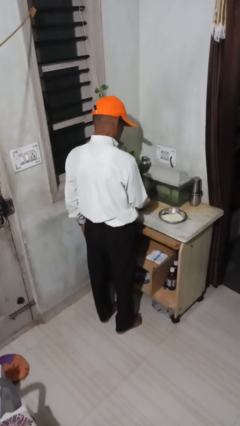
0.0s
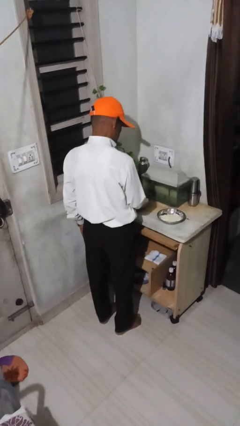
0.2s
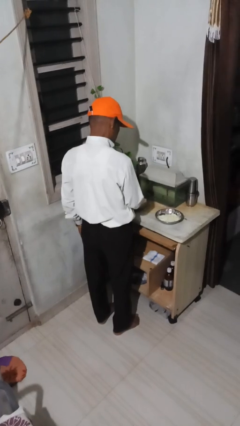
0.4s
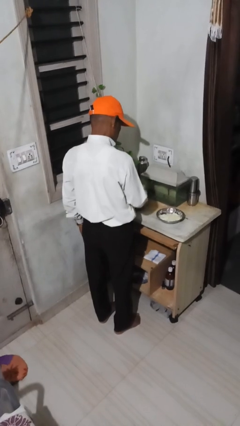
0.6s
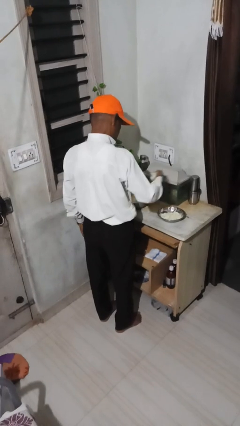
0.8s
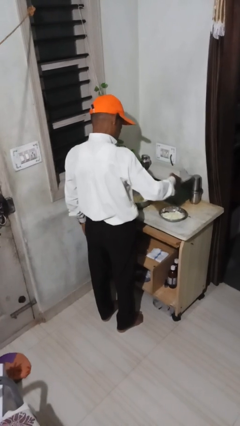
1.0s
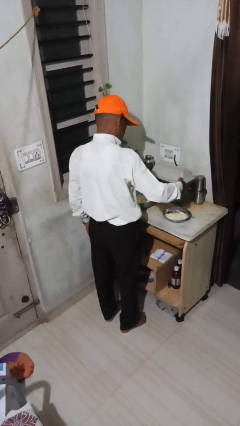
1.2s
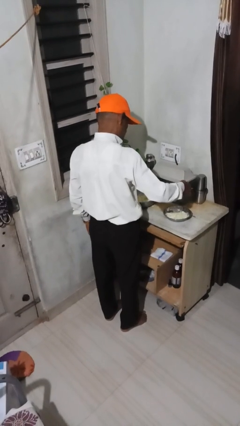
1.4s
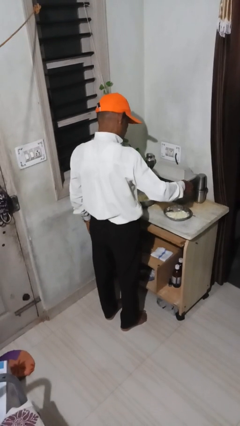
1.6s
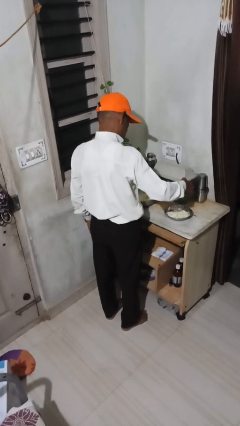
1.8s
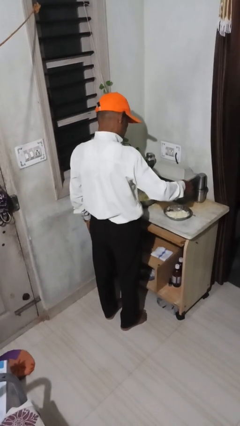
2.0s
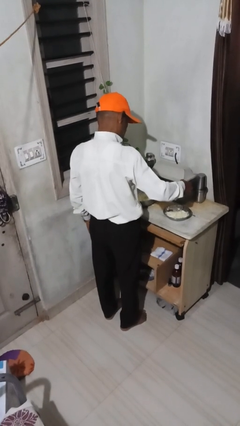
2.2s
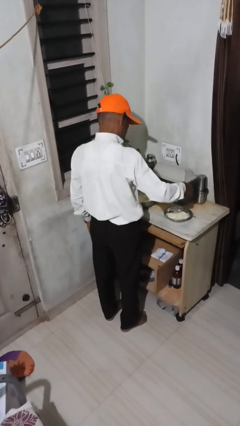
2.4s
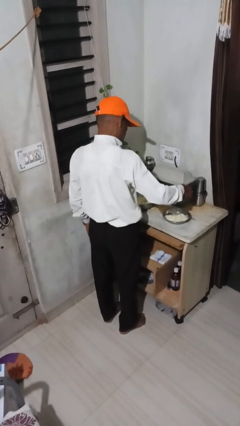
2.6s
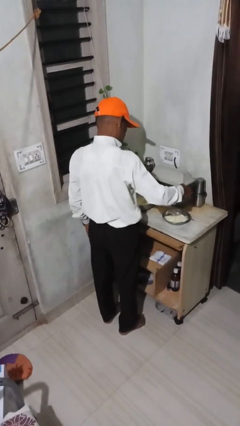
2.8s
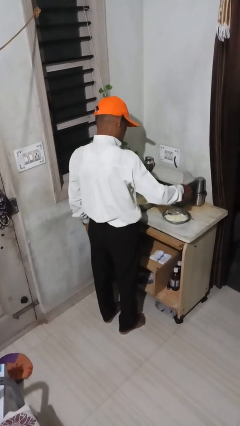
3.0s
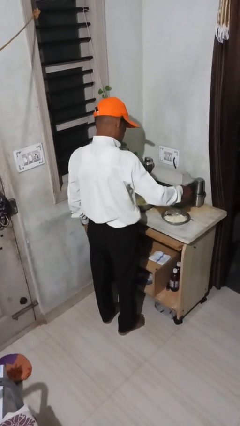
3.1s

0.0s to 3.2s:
person pours into bowl

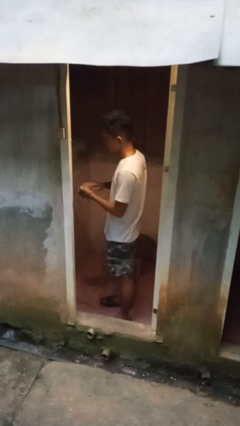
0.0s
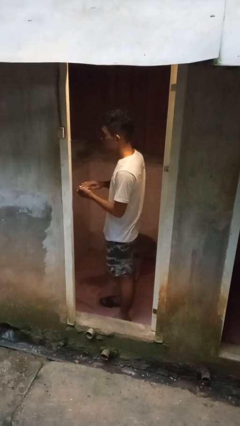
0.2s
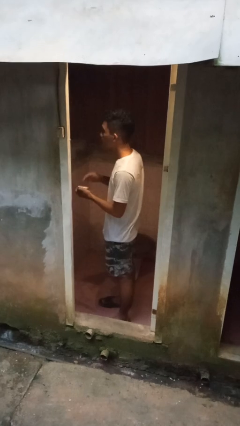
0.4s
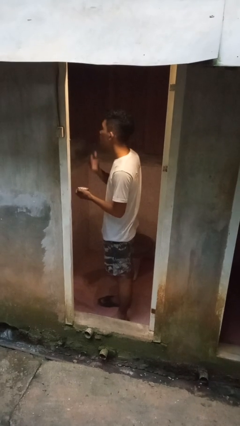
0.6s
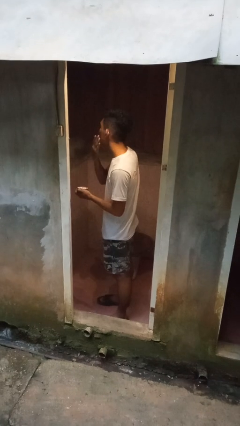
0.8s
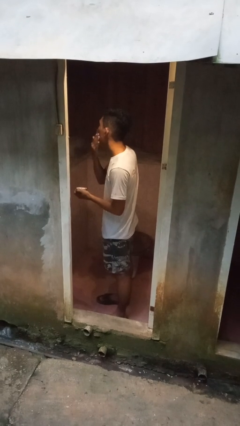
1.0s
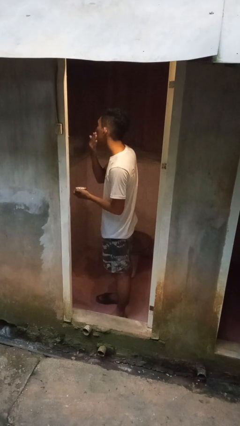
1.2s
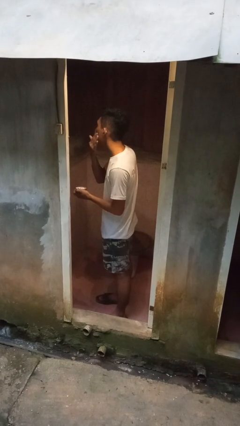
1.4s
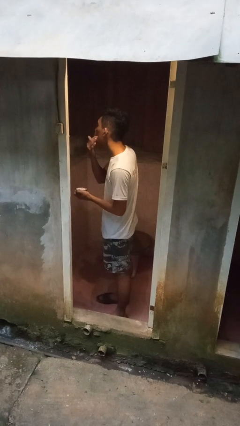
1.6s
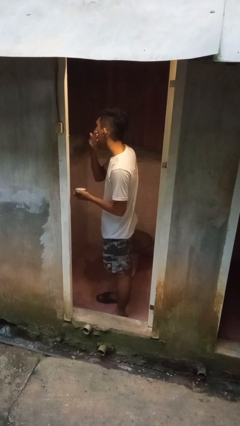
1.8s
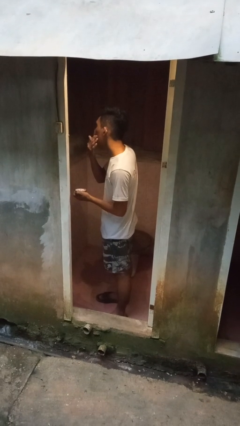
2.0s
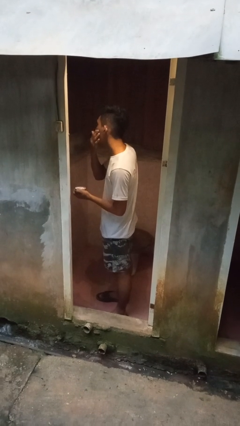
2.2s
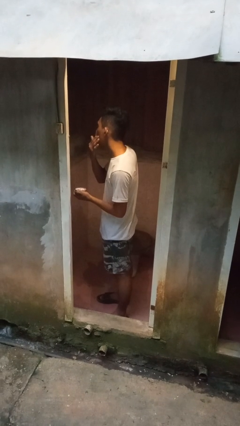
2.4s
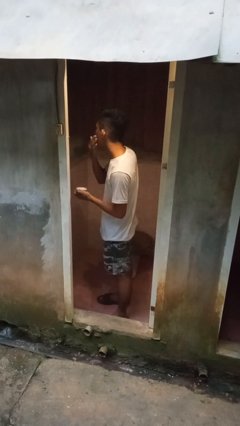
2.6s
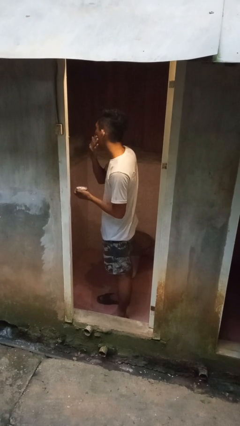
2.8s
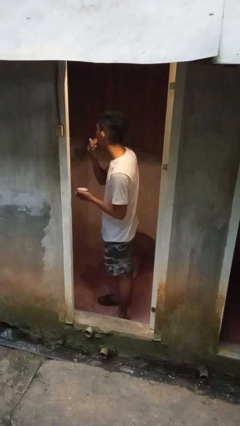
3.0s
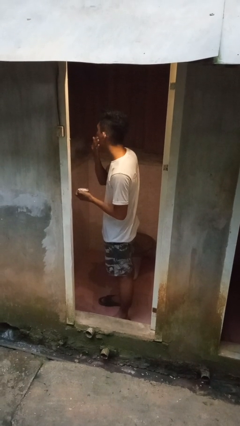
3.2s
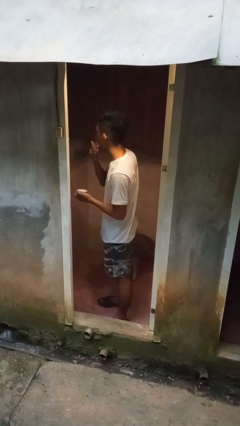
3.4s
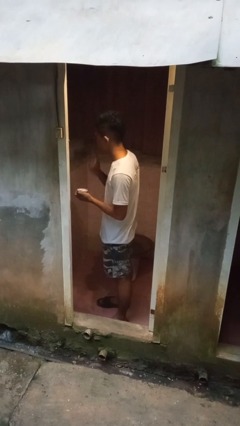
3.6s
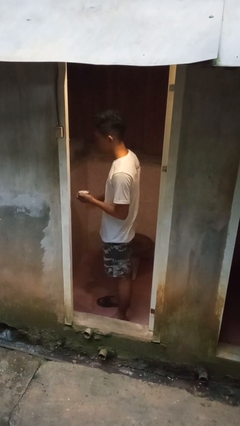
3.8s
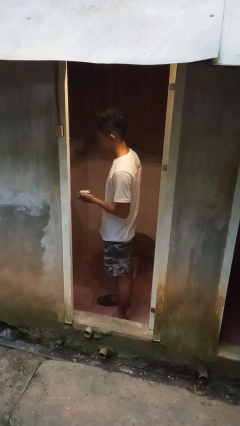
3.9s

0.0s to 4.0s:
person applies facial moisturizer

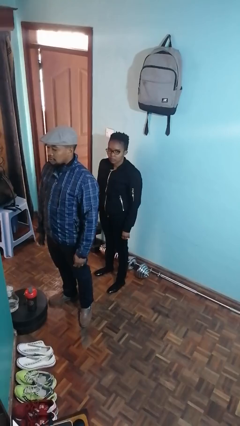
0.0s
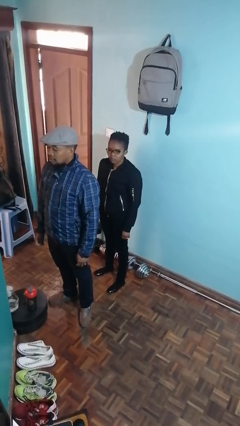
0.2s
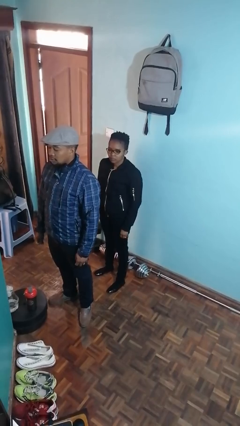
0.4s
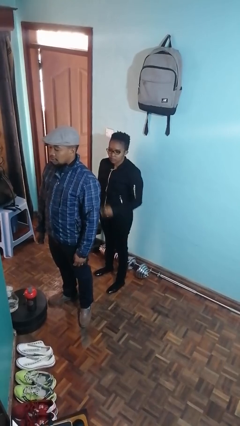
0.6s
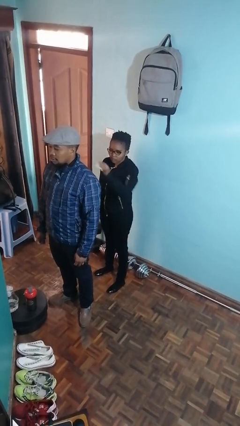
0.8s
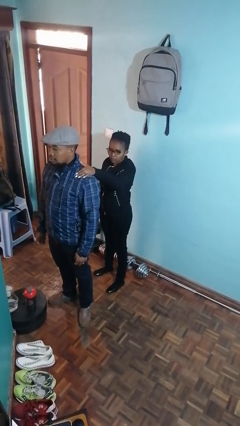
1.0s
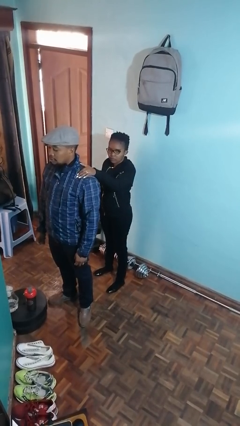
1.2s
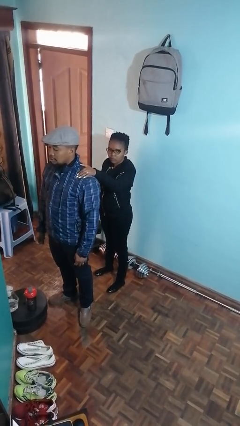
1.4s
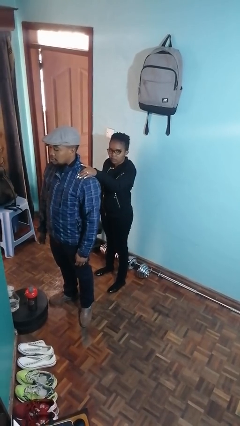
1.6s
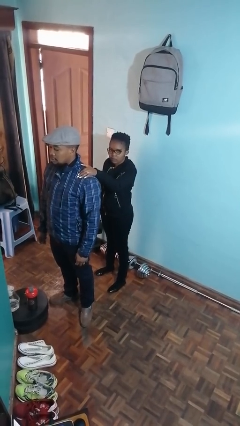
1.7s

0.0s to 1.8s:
person grabs person by shoulder

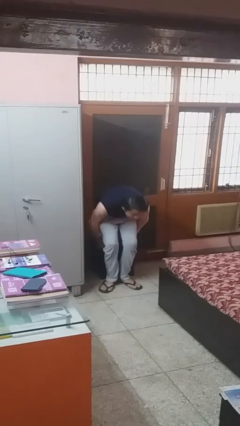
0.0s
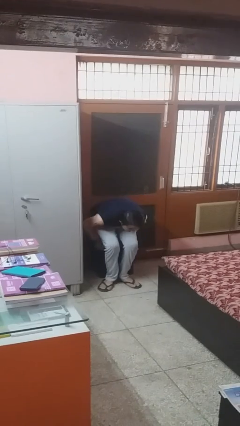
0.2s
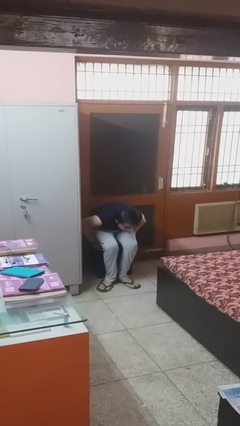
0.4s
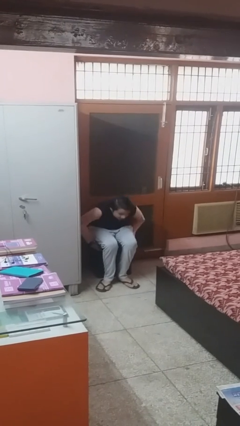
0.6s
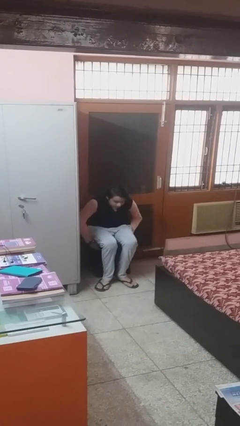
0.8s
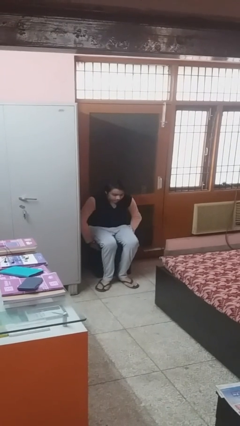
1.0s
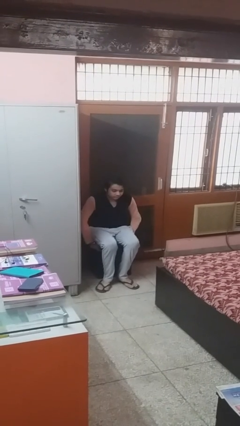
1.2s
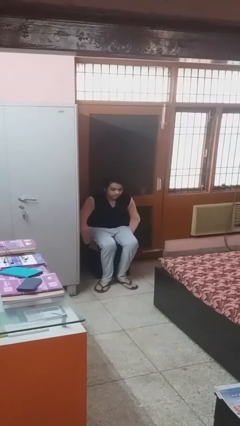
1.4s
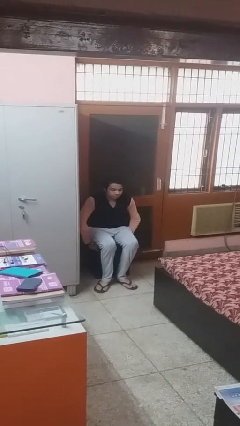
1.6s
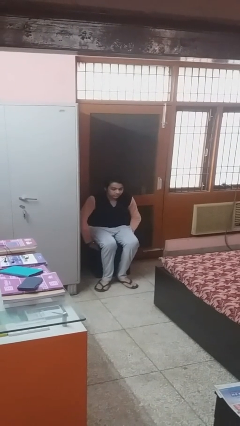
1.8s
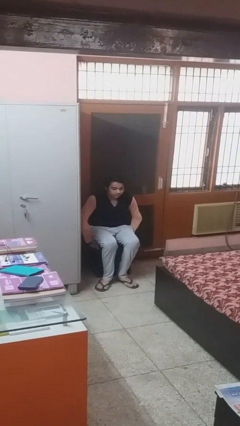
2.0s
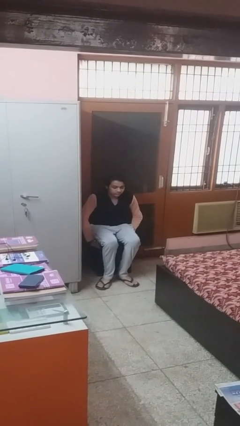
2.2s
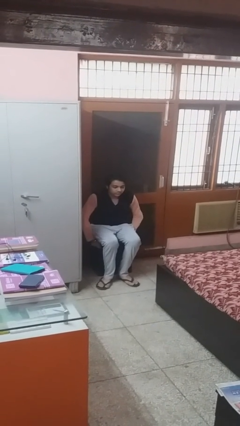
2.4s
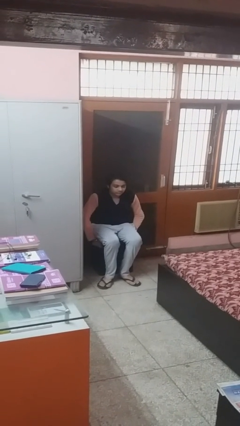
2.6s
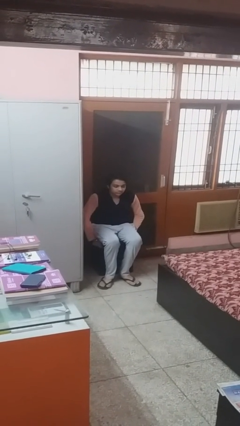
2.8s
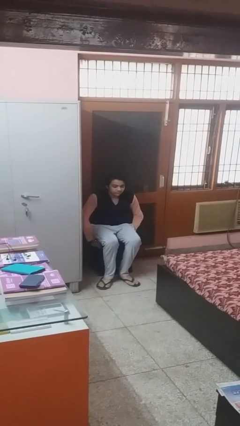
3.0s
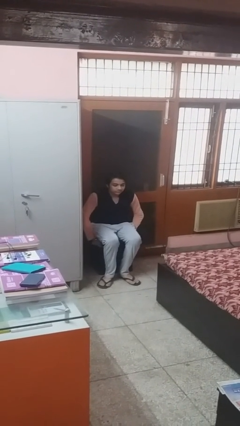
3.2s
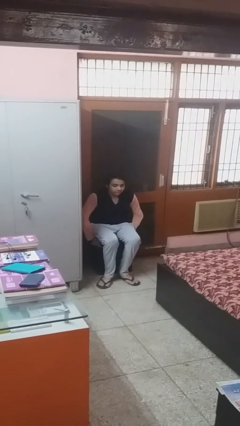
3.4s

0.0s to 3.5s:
person sits down

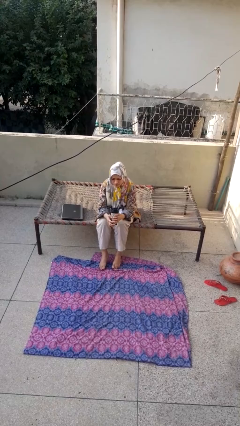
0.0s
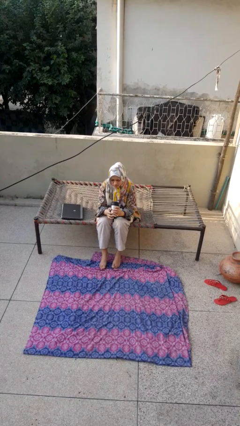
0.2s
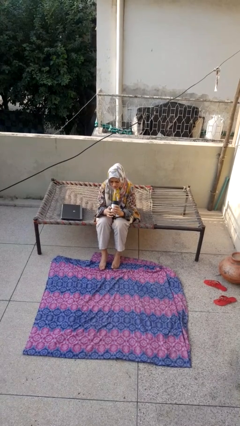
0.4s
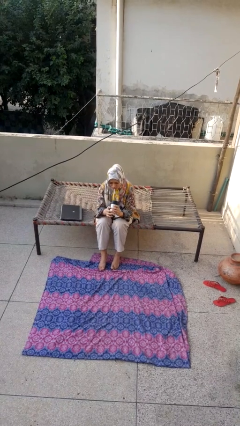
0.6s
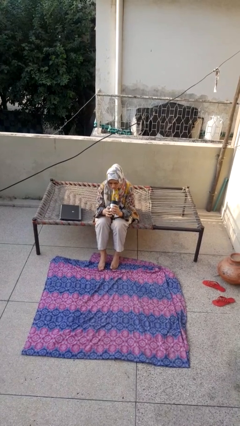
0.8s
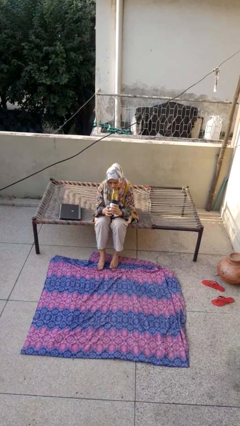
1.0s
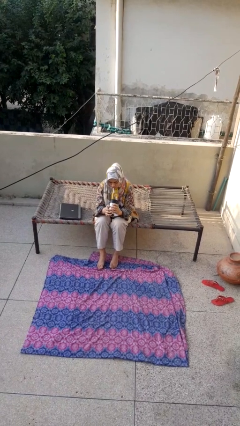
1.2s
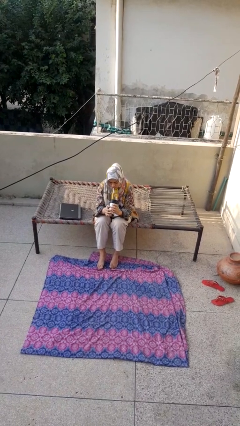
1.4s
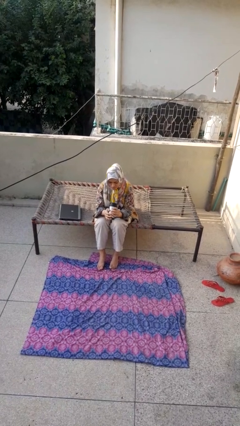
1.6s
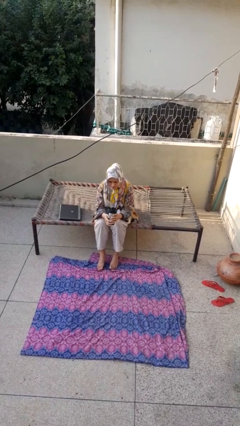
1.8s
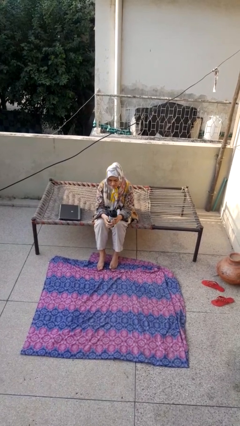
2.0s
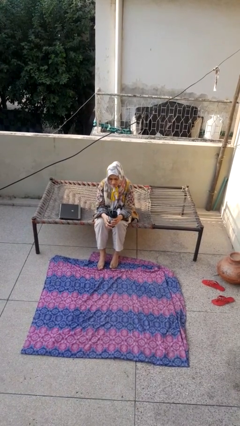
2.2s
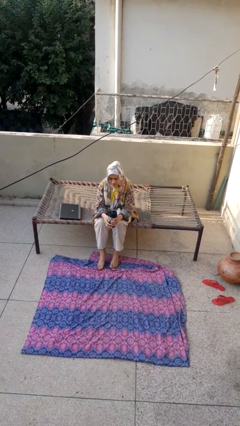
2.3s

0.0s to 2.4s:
person drinks from straw

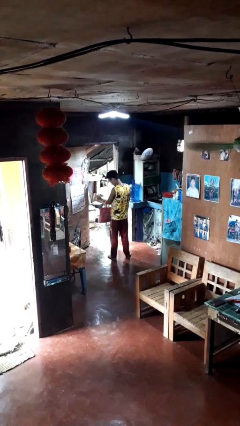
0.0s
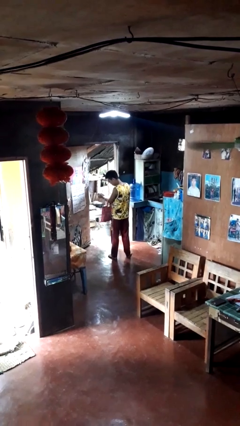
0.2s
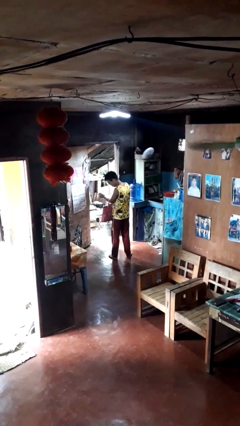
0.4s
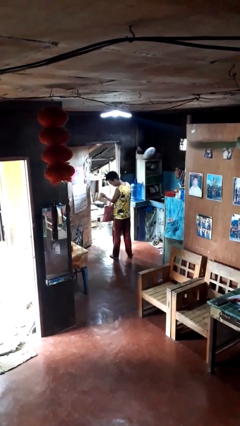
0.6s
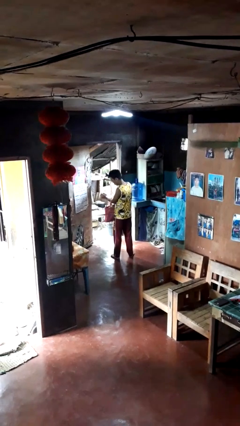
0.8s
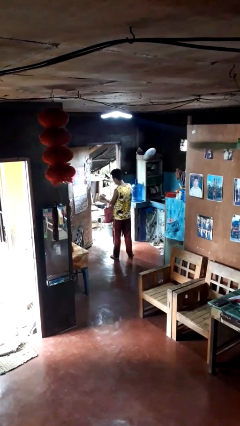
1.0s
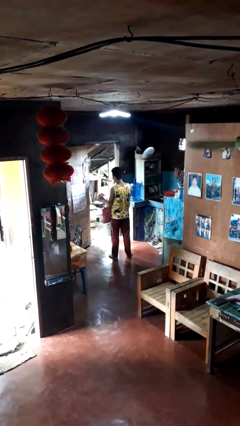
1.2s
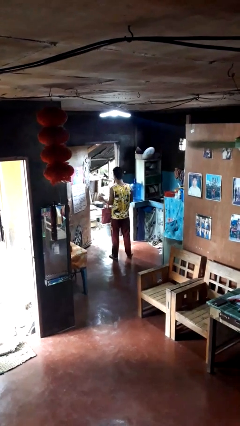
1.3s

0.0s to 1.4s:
person puts object into purse

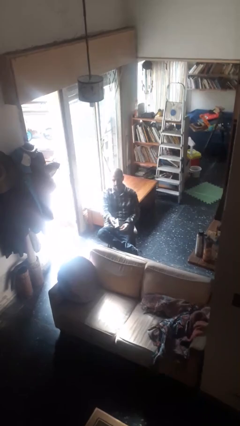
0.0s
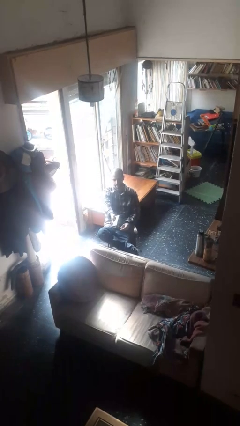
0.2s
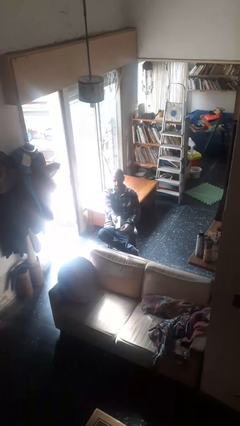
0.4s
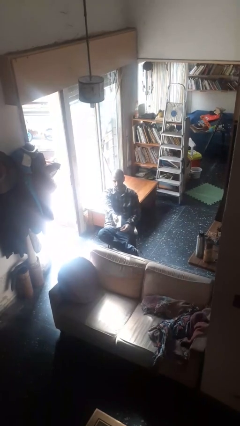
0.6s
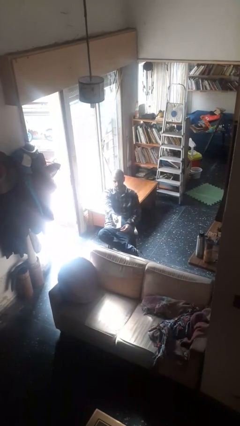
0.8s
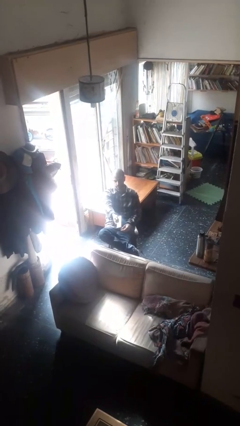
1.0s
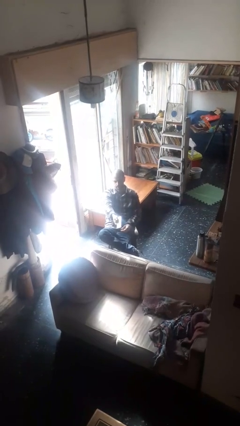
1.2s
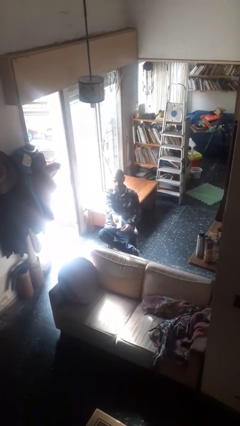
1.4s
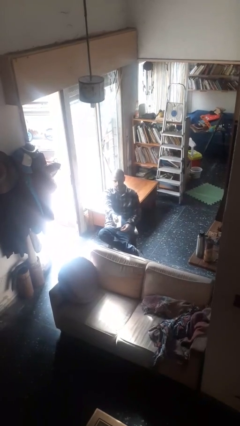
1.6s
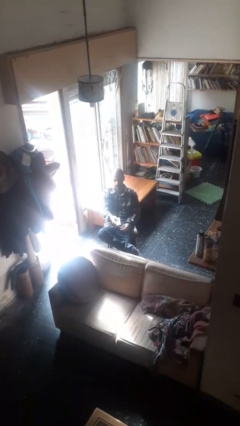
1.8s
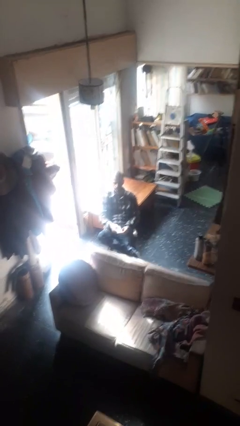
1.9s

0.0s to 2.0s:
person uses television remote
